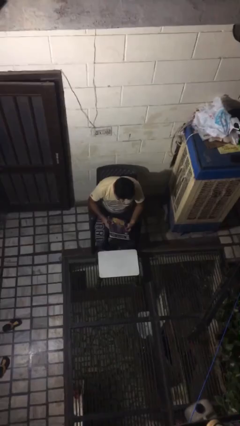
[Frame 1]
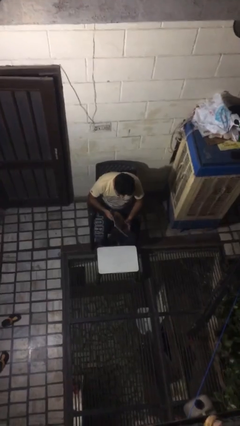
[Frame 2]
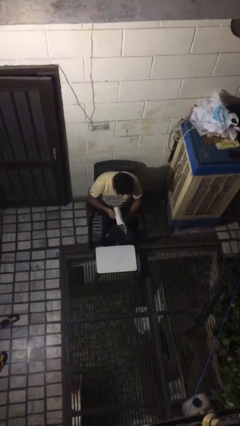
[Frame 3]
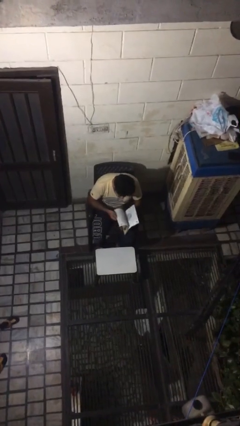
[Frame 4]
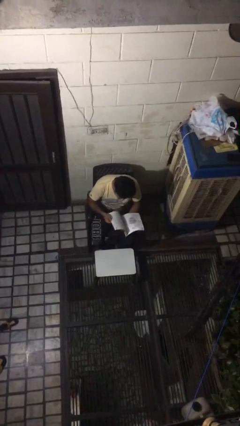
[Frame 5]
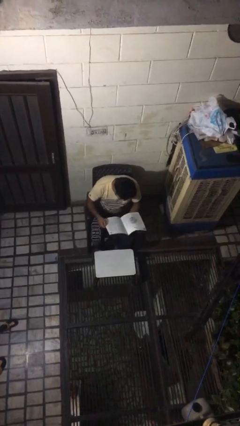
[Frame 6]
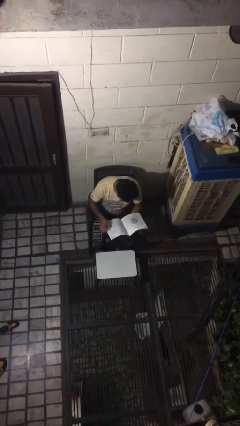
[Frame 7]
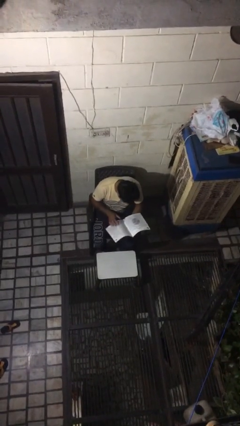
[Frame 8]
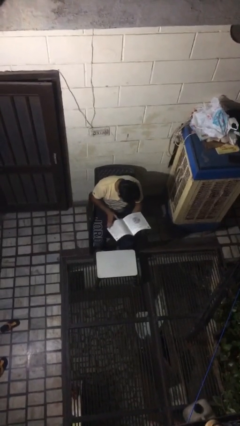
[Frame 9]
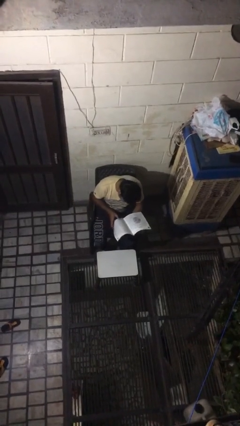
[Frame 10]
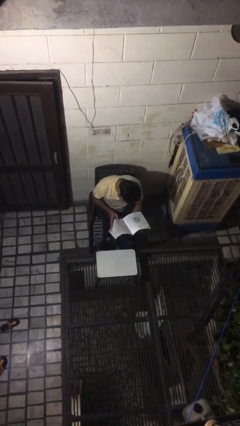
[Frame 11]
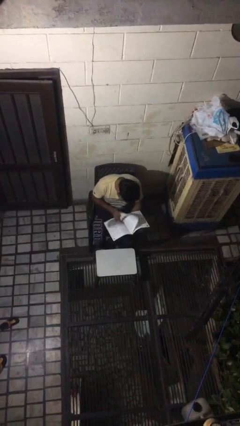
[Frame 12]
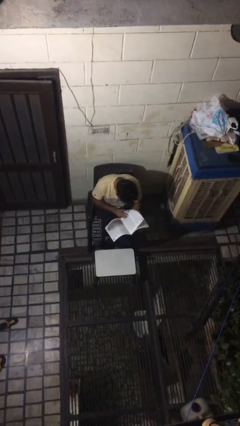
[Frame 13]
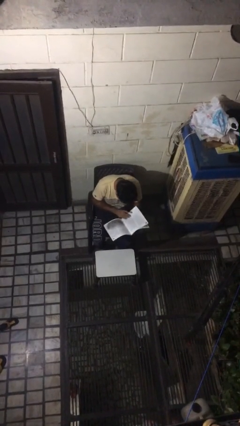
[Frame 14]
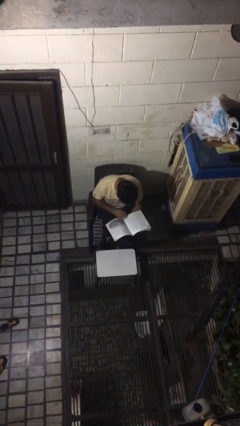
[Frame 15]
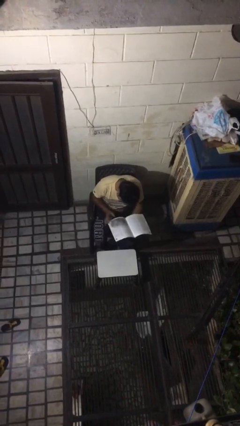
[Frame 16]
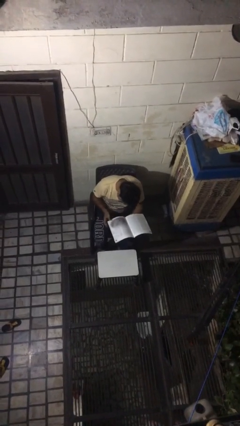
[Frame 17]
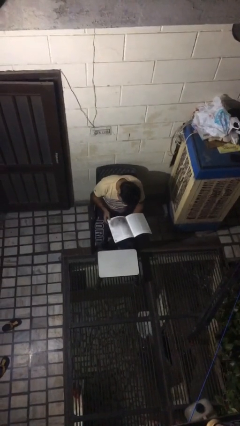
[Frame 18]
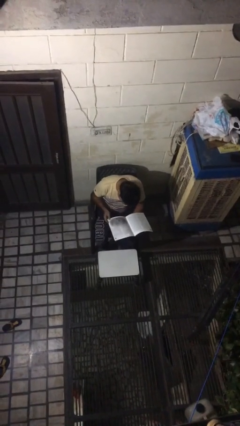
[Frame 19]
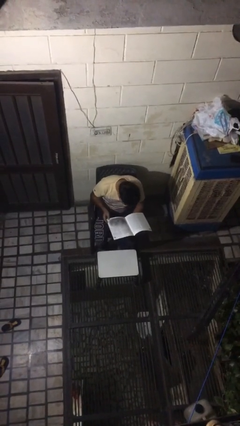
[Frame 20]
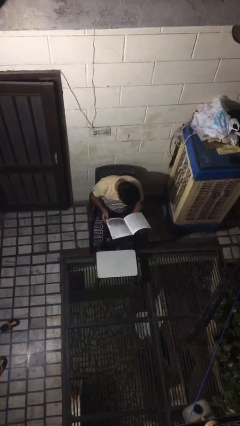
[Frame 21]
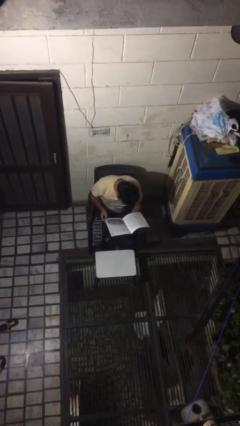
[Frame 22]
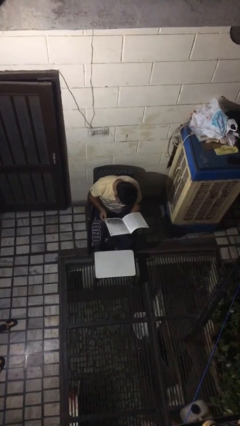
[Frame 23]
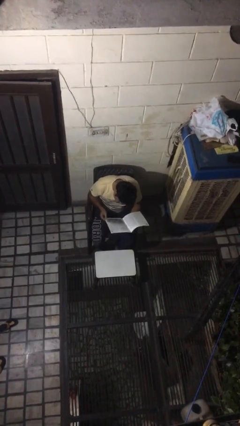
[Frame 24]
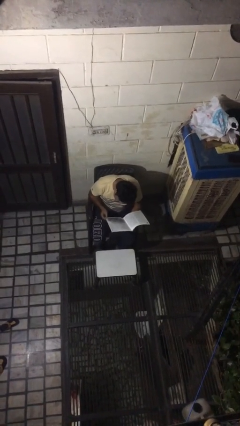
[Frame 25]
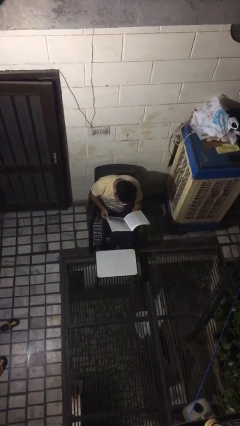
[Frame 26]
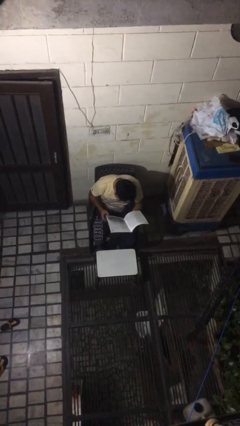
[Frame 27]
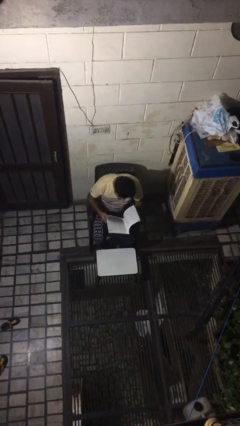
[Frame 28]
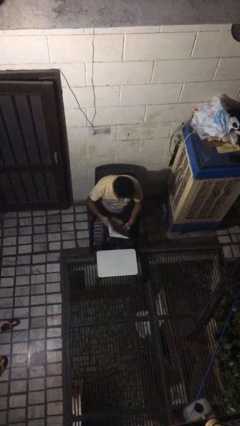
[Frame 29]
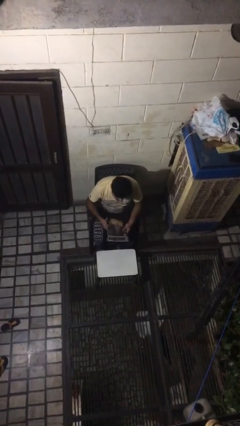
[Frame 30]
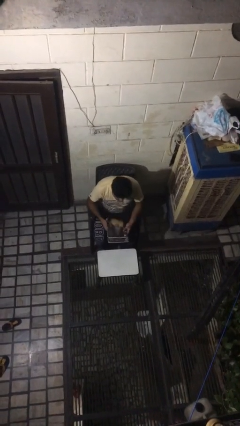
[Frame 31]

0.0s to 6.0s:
person reads magazine

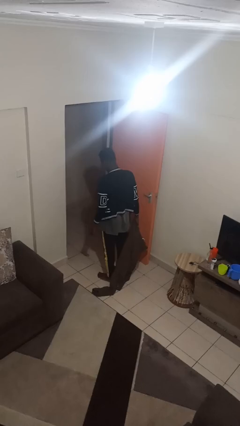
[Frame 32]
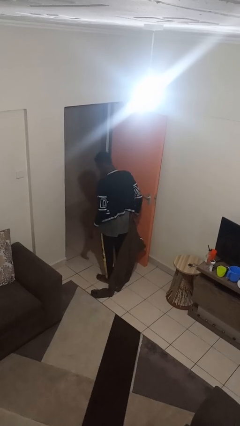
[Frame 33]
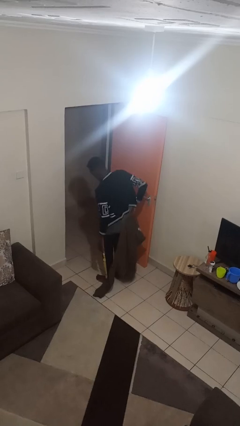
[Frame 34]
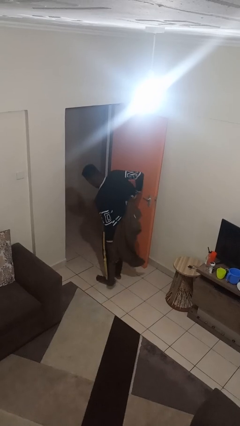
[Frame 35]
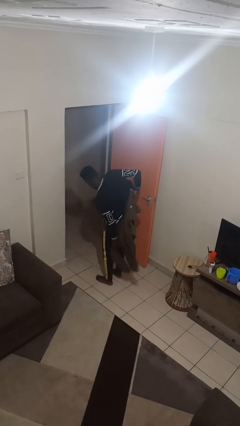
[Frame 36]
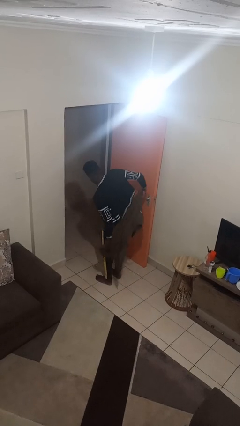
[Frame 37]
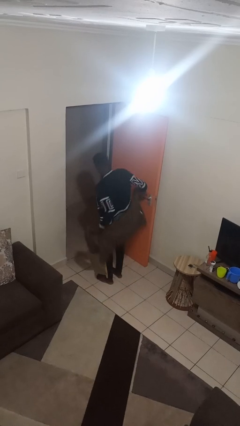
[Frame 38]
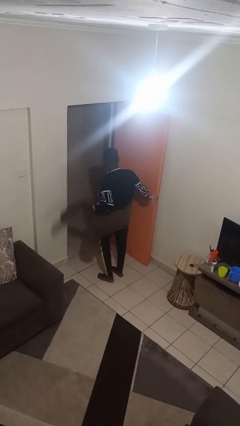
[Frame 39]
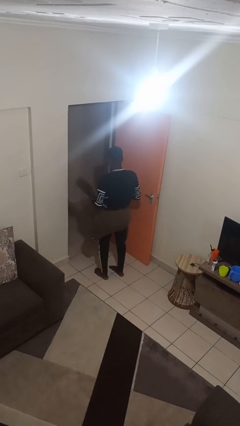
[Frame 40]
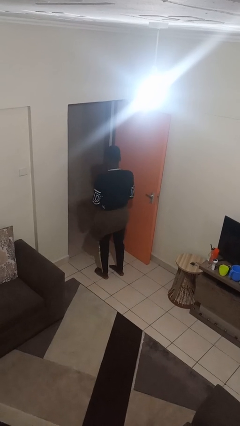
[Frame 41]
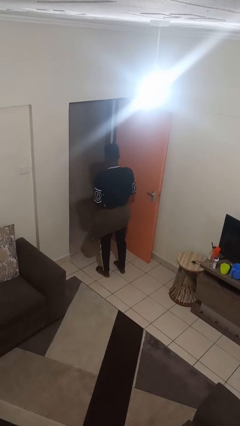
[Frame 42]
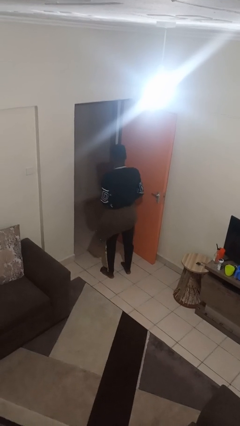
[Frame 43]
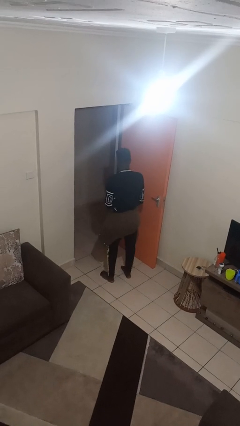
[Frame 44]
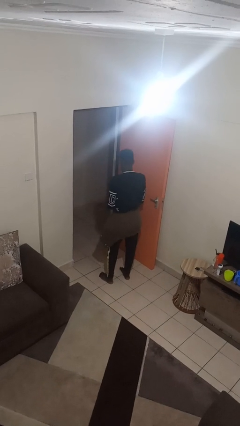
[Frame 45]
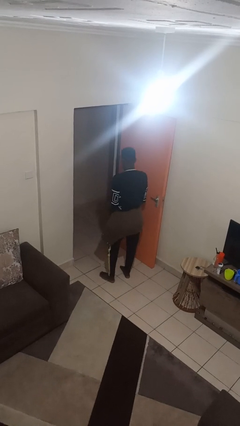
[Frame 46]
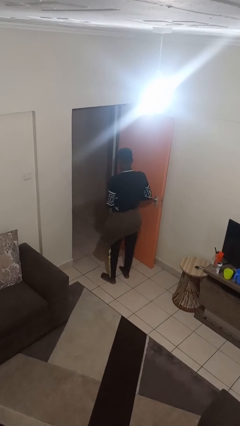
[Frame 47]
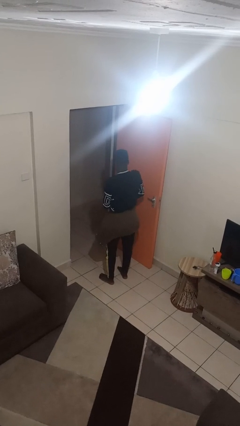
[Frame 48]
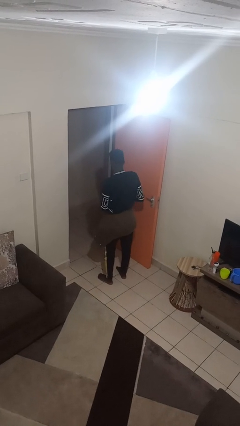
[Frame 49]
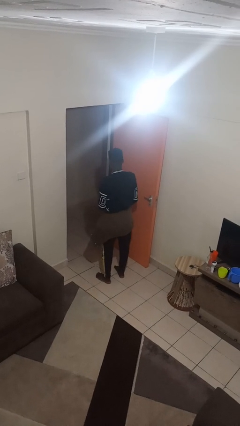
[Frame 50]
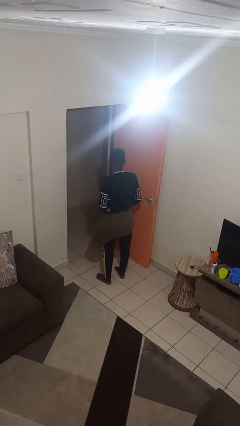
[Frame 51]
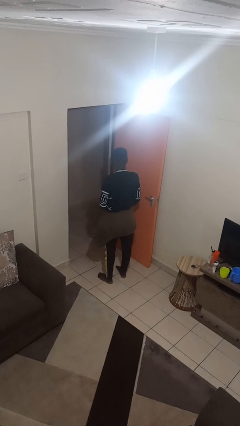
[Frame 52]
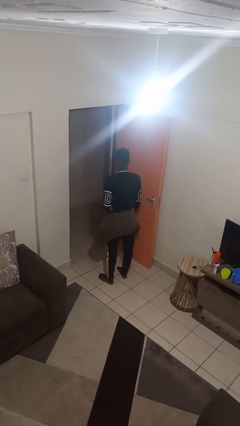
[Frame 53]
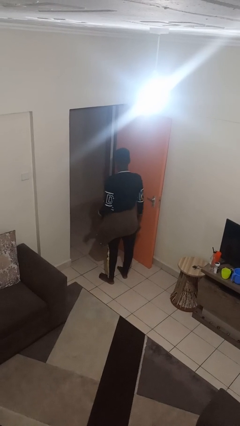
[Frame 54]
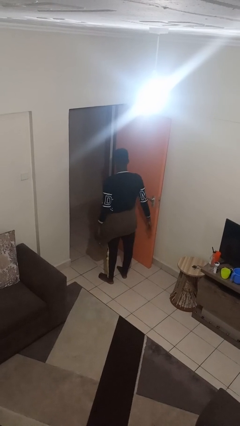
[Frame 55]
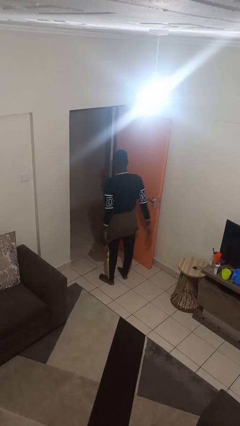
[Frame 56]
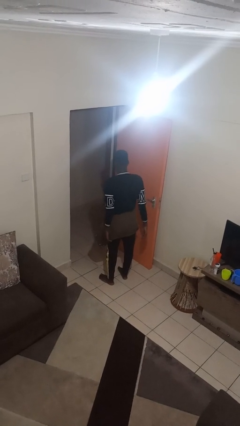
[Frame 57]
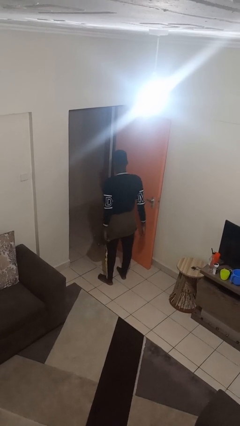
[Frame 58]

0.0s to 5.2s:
person ties jacket around waist

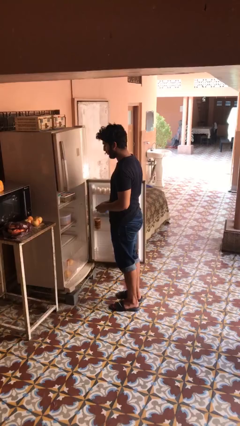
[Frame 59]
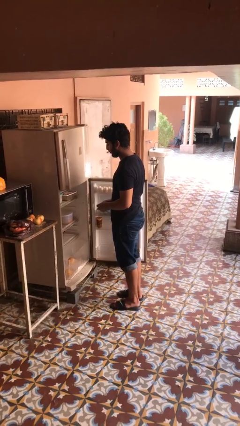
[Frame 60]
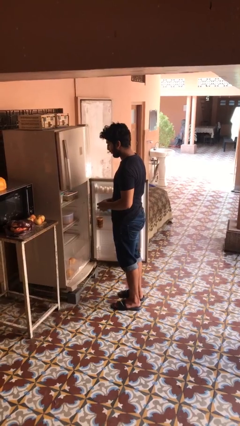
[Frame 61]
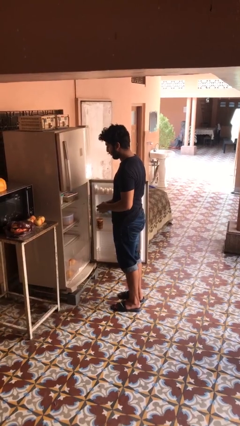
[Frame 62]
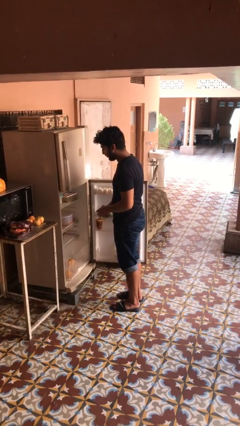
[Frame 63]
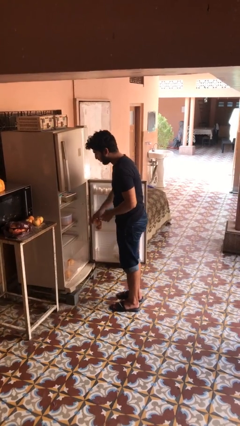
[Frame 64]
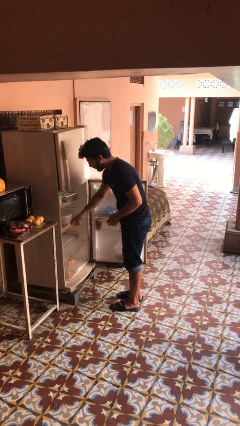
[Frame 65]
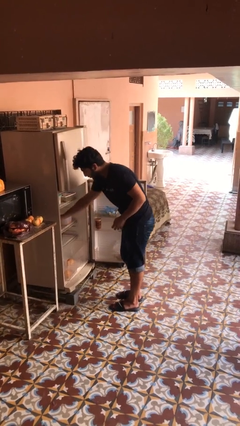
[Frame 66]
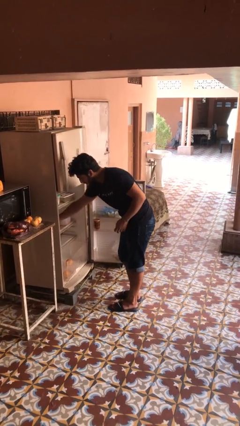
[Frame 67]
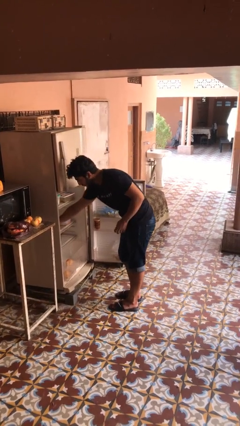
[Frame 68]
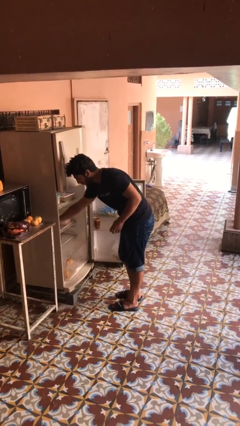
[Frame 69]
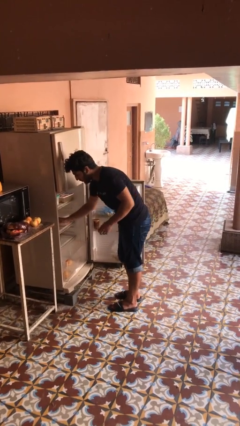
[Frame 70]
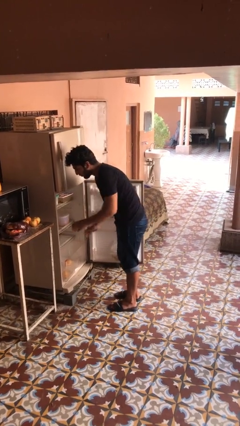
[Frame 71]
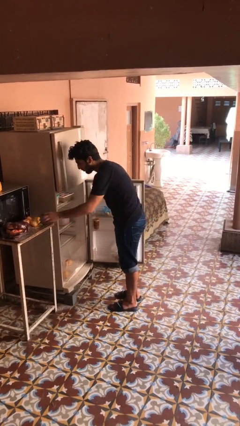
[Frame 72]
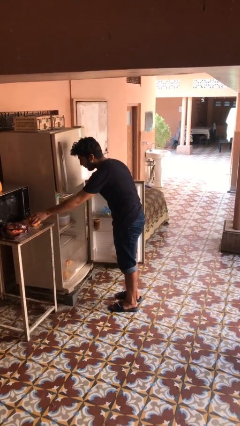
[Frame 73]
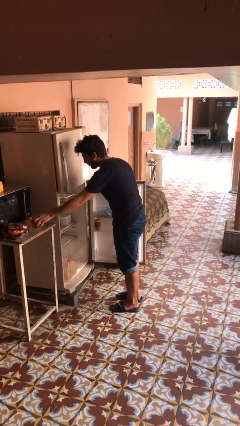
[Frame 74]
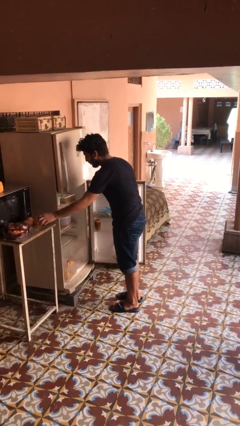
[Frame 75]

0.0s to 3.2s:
person loads groceries into refrigerator

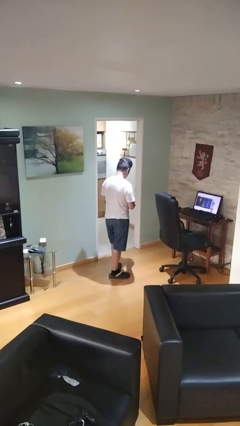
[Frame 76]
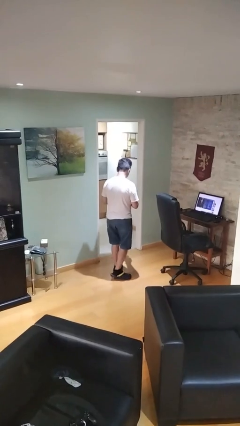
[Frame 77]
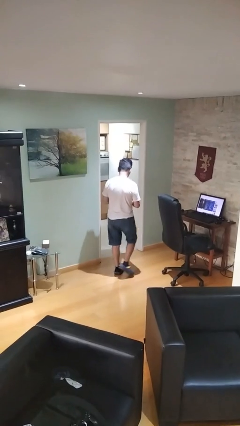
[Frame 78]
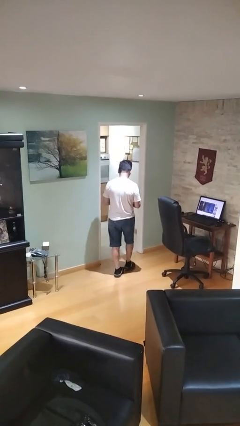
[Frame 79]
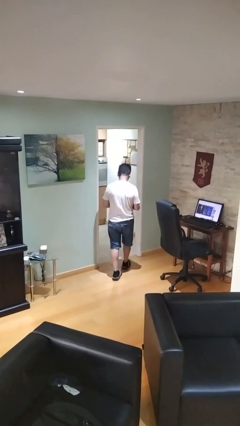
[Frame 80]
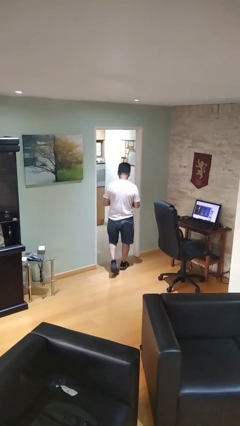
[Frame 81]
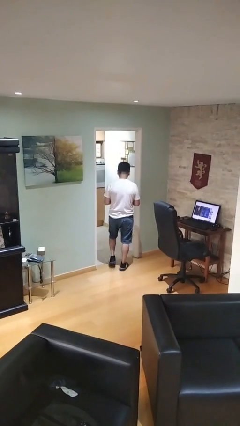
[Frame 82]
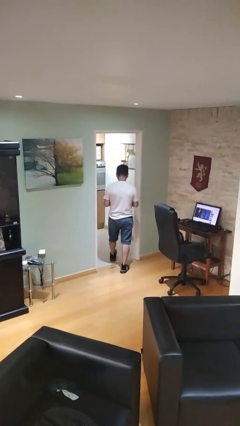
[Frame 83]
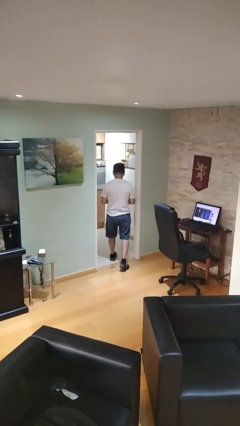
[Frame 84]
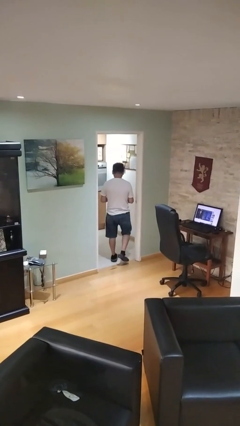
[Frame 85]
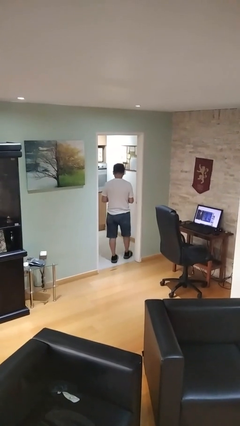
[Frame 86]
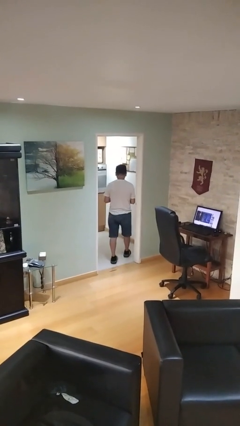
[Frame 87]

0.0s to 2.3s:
person exits scene through structure

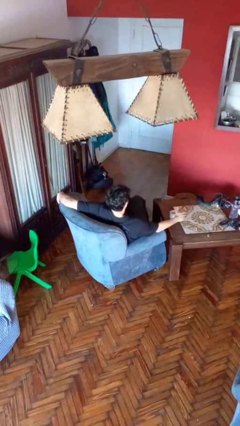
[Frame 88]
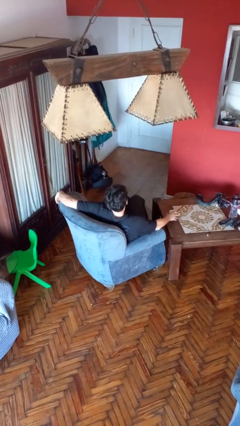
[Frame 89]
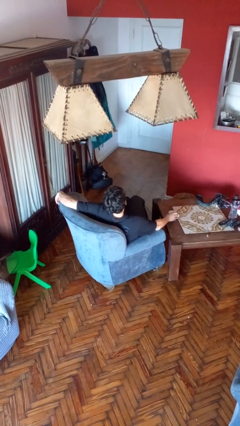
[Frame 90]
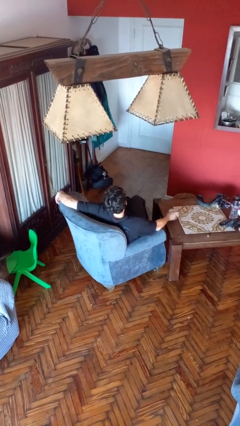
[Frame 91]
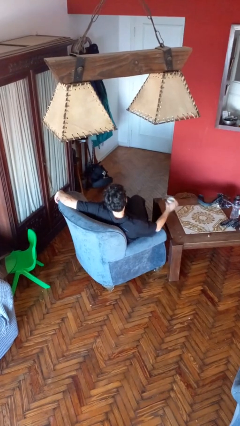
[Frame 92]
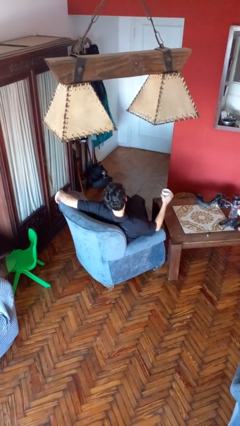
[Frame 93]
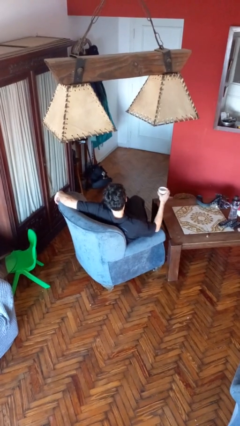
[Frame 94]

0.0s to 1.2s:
person picks up object from table
